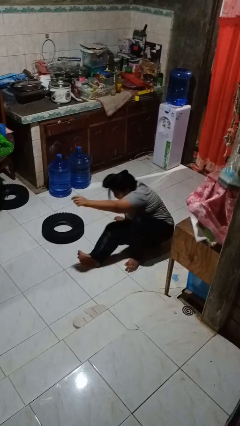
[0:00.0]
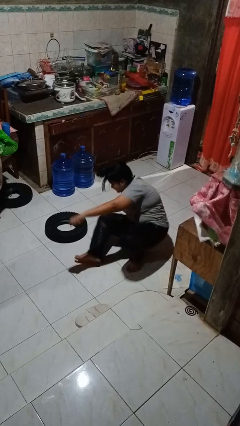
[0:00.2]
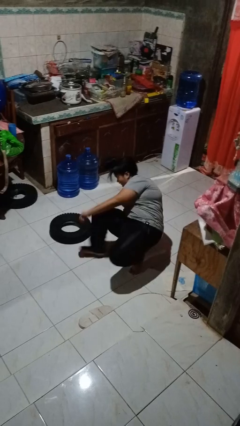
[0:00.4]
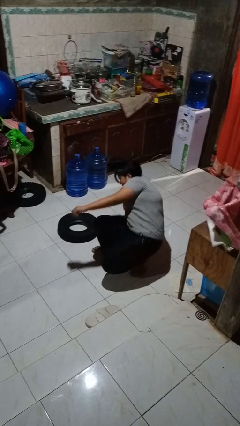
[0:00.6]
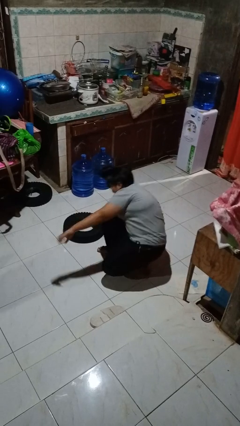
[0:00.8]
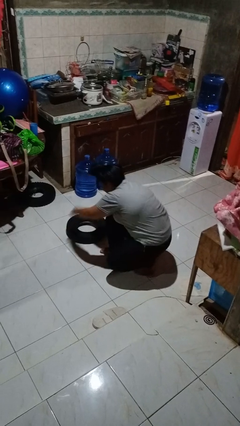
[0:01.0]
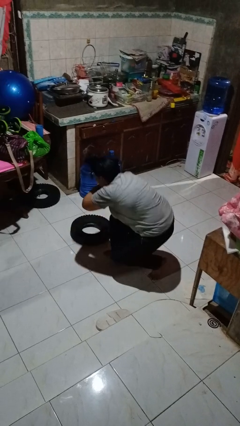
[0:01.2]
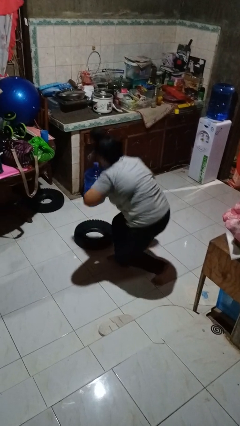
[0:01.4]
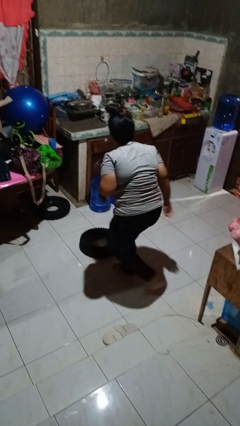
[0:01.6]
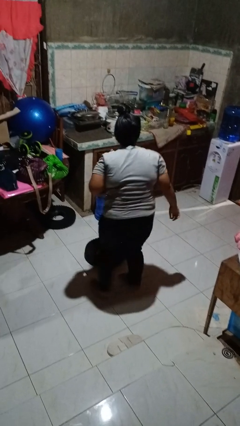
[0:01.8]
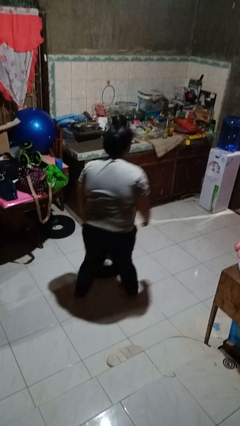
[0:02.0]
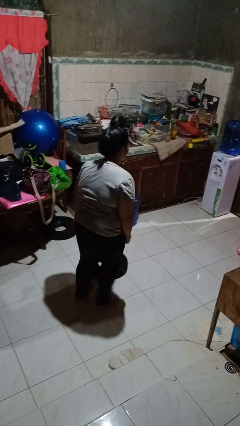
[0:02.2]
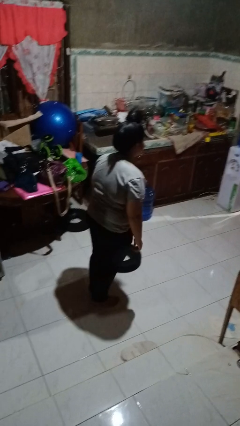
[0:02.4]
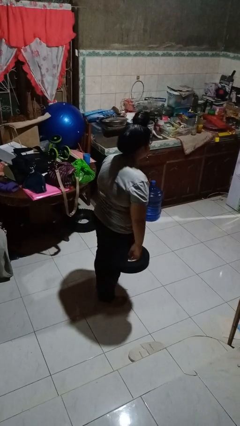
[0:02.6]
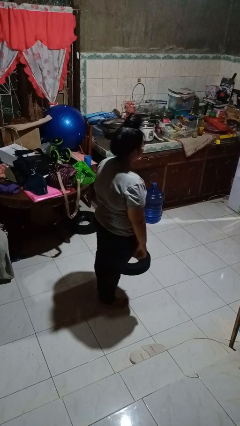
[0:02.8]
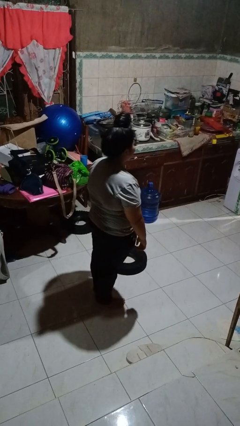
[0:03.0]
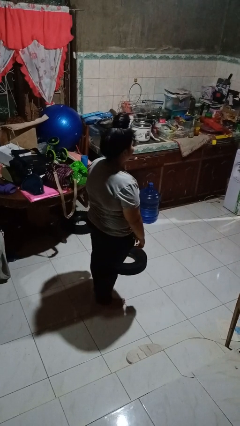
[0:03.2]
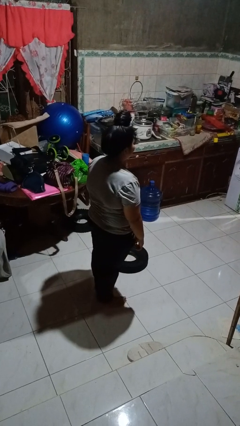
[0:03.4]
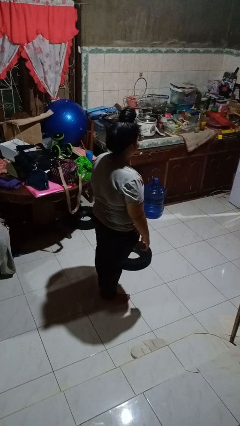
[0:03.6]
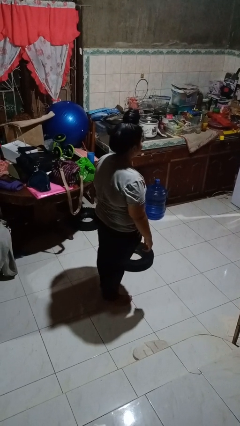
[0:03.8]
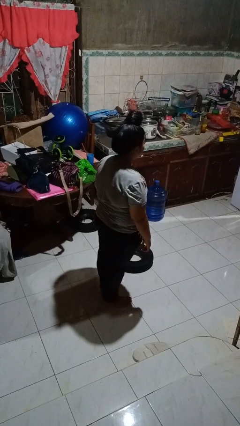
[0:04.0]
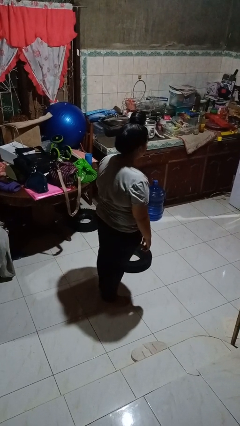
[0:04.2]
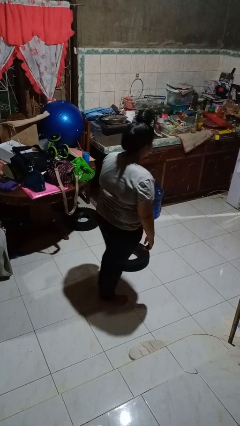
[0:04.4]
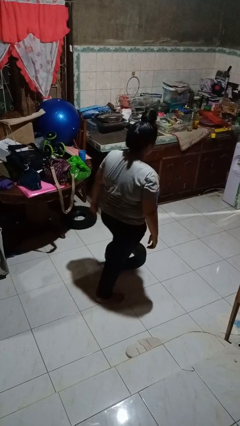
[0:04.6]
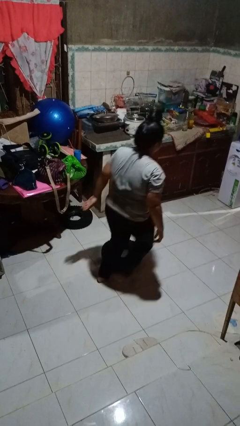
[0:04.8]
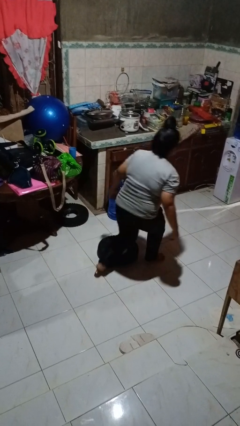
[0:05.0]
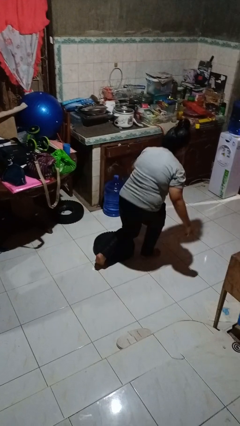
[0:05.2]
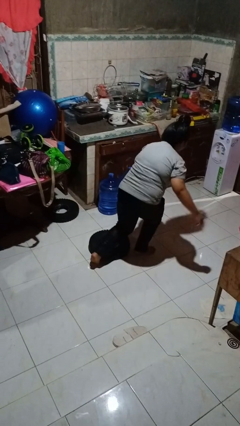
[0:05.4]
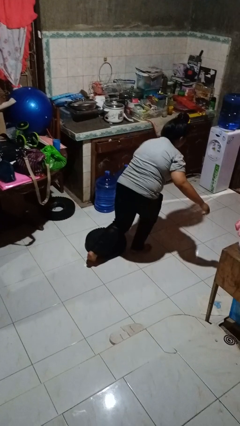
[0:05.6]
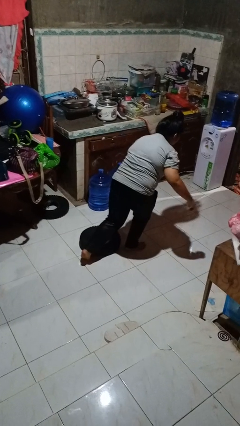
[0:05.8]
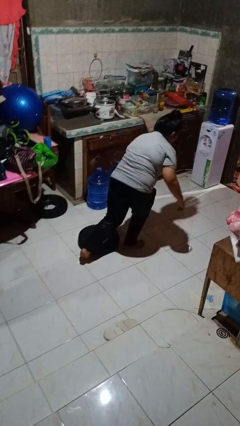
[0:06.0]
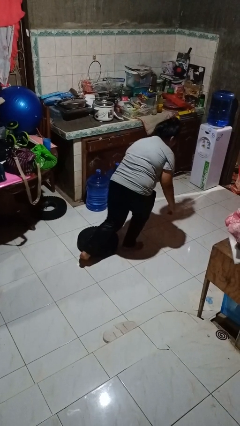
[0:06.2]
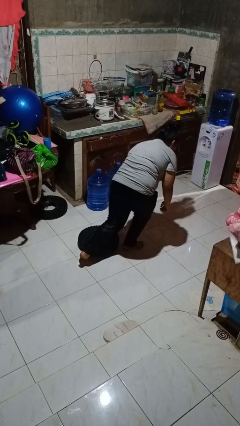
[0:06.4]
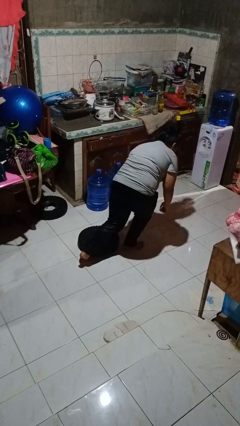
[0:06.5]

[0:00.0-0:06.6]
person stands up from floor

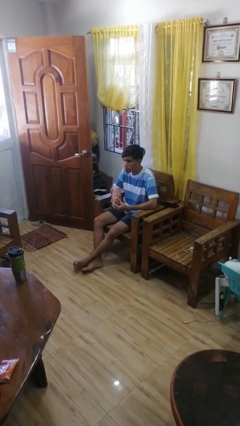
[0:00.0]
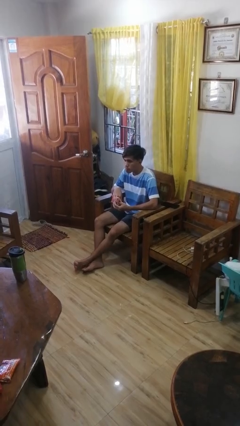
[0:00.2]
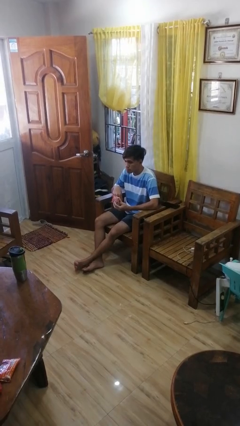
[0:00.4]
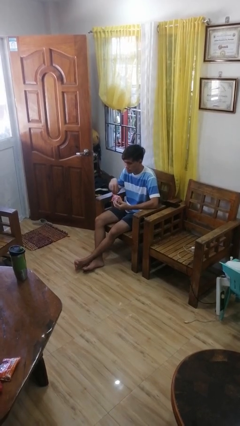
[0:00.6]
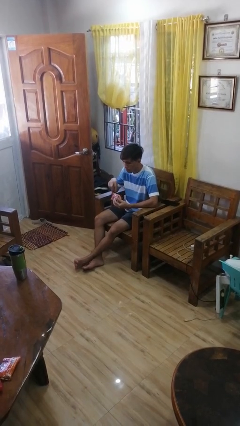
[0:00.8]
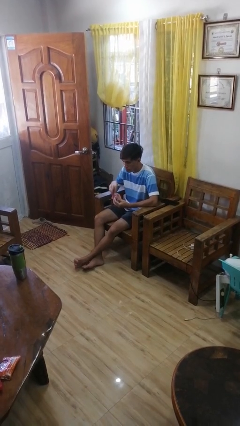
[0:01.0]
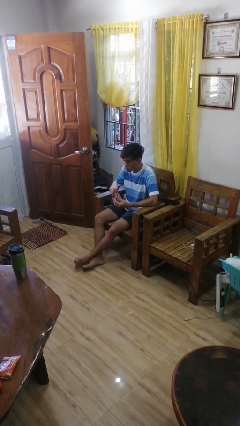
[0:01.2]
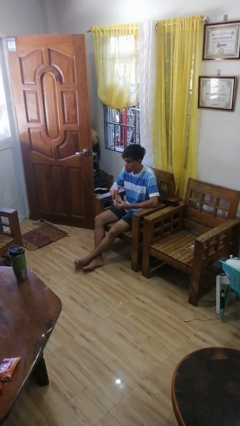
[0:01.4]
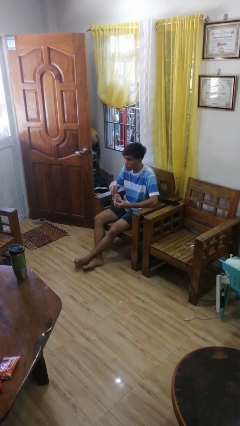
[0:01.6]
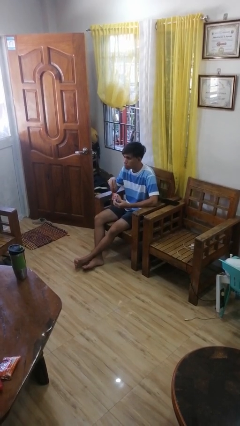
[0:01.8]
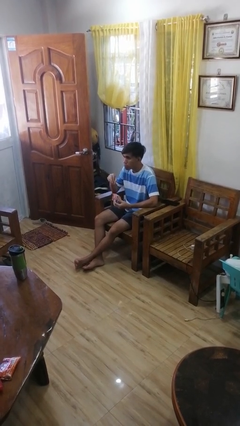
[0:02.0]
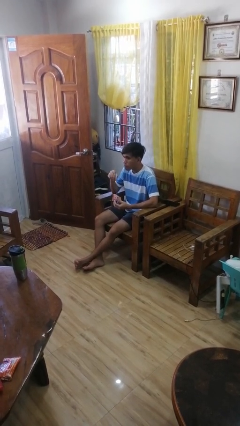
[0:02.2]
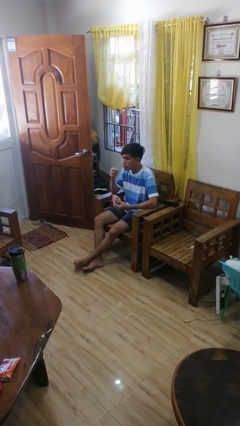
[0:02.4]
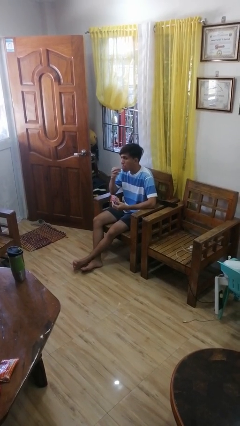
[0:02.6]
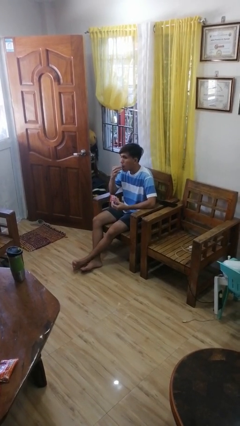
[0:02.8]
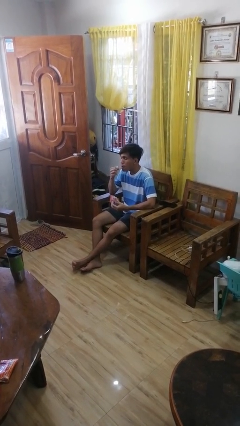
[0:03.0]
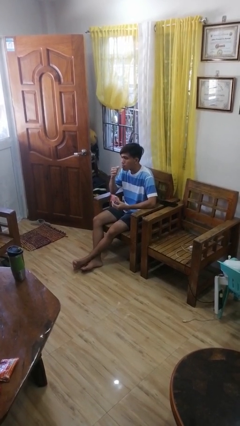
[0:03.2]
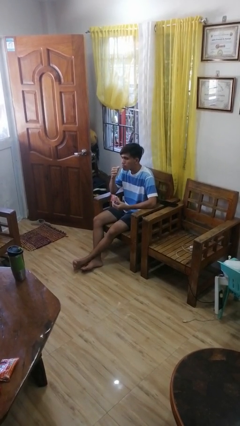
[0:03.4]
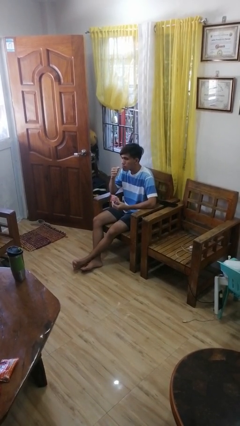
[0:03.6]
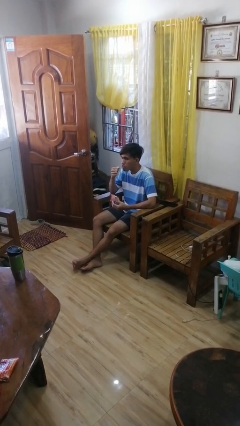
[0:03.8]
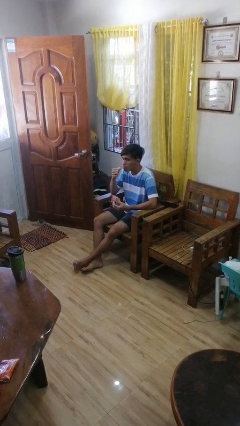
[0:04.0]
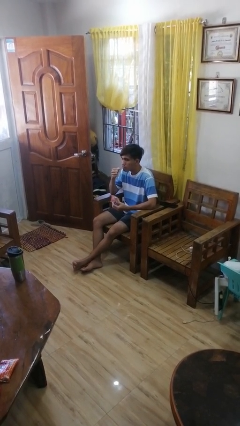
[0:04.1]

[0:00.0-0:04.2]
person eats snack from bag

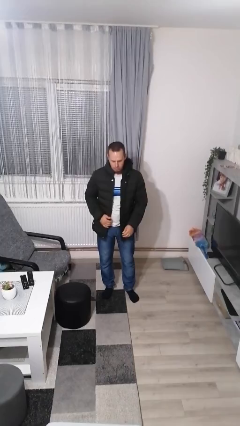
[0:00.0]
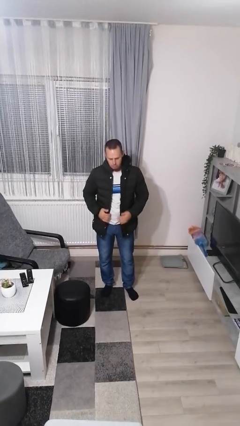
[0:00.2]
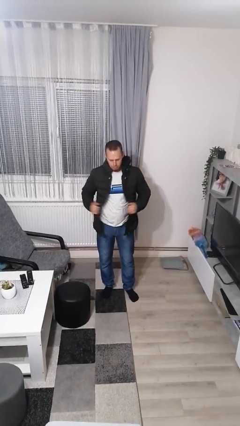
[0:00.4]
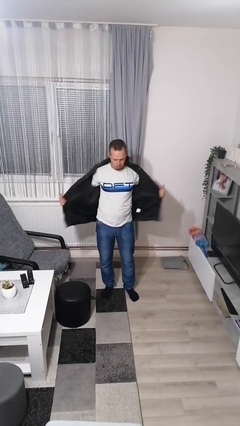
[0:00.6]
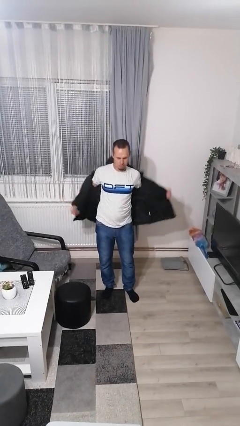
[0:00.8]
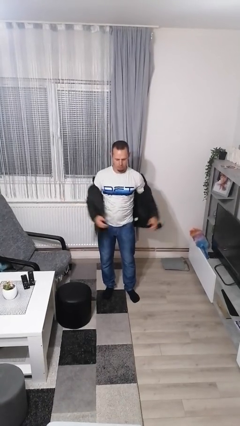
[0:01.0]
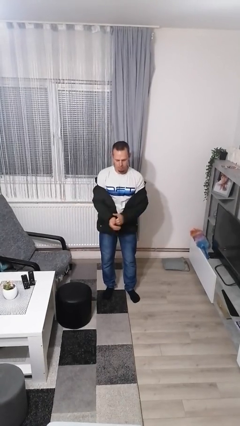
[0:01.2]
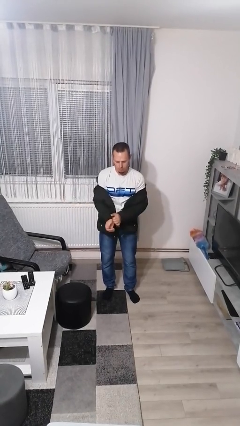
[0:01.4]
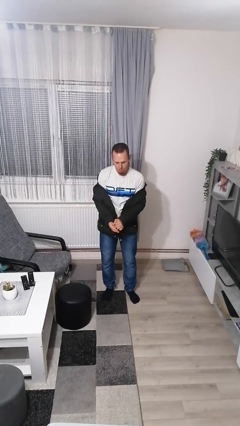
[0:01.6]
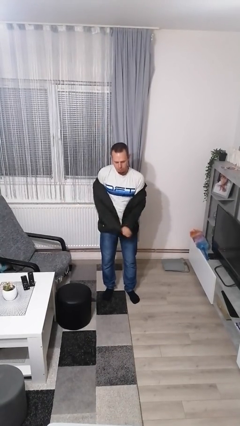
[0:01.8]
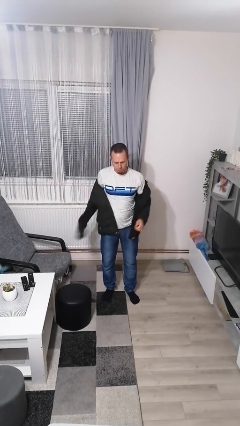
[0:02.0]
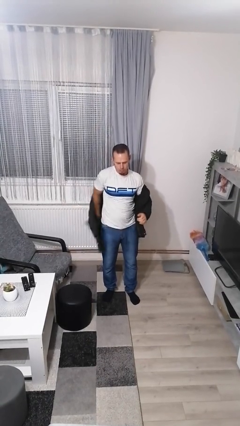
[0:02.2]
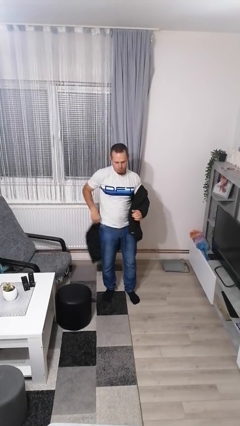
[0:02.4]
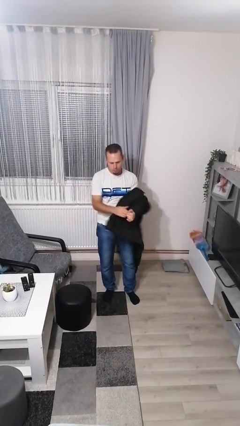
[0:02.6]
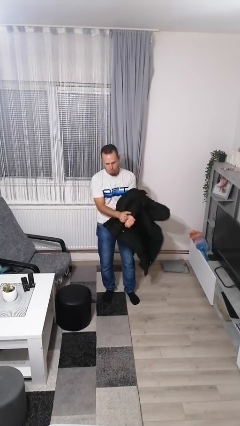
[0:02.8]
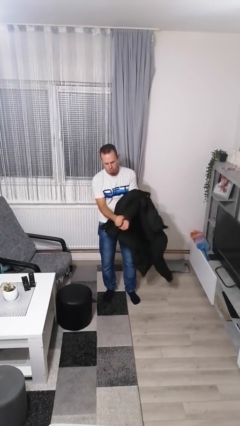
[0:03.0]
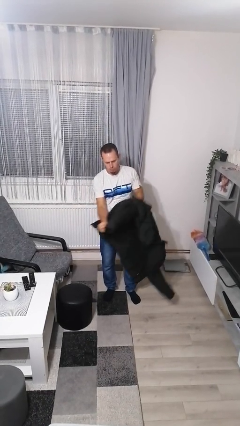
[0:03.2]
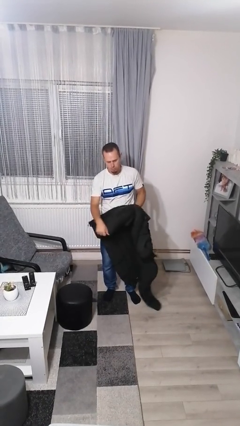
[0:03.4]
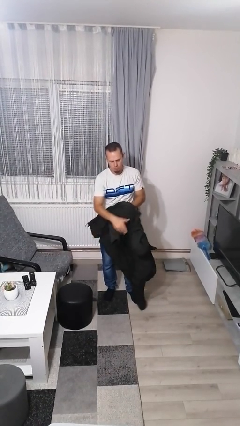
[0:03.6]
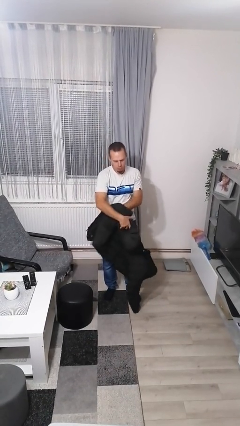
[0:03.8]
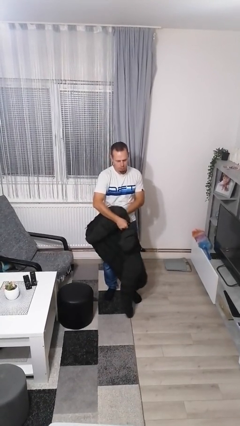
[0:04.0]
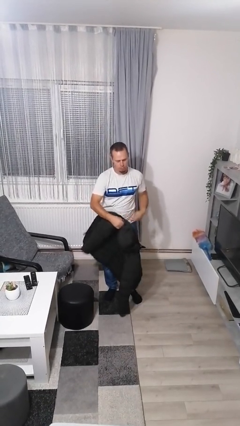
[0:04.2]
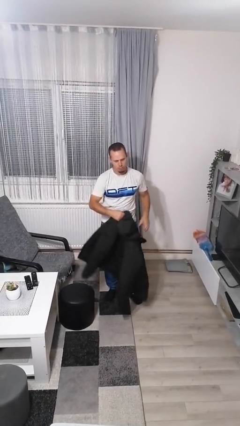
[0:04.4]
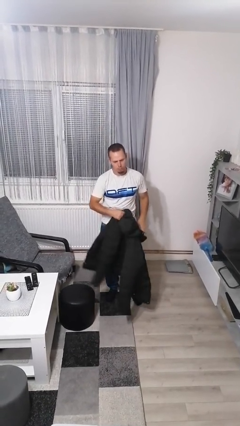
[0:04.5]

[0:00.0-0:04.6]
person takes off jacket

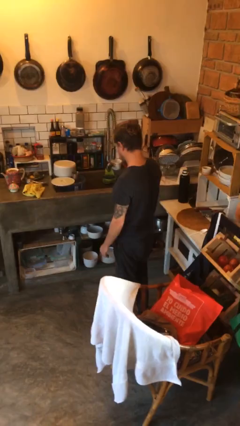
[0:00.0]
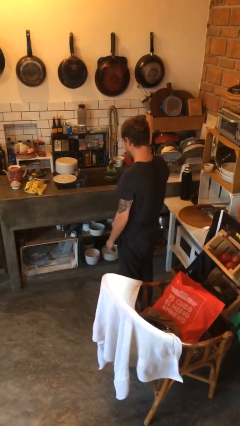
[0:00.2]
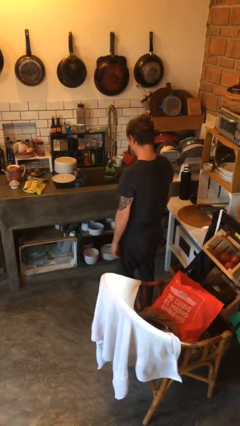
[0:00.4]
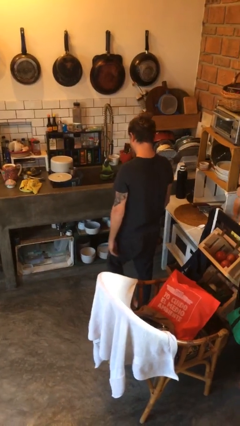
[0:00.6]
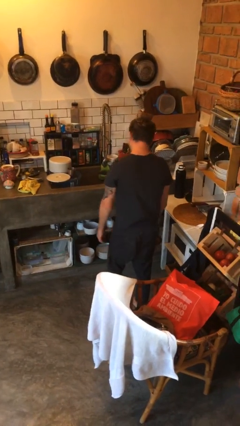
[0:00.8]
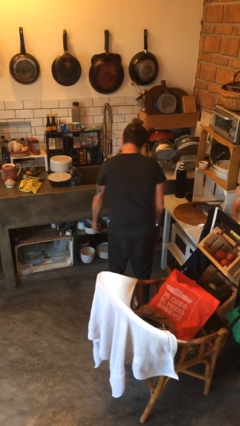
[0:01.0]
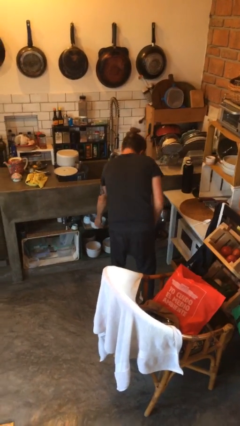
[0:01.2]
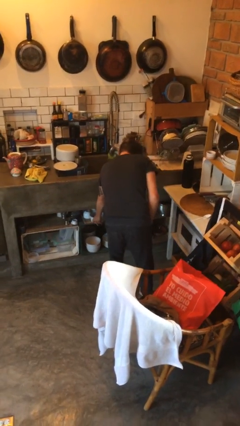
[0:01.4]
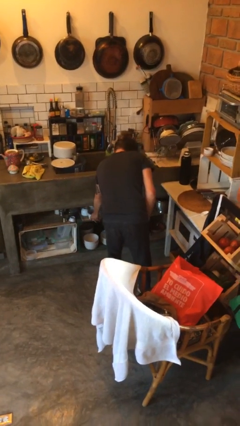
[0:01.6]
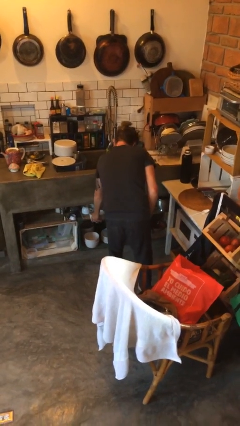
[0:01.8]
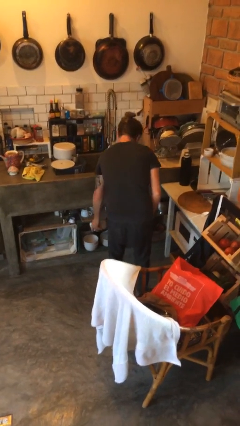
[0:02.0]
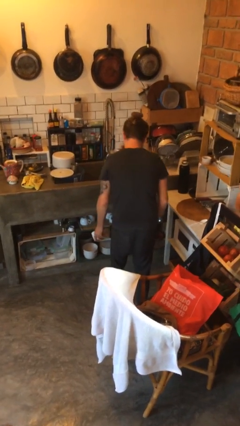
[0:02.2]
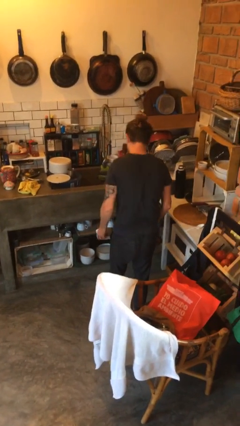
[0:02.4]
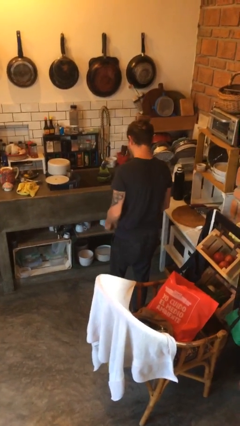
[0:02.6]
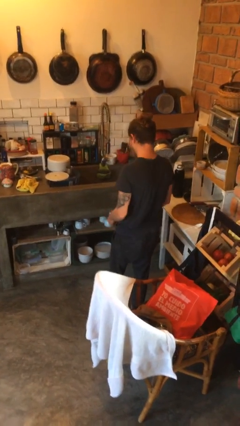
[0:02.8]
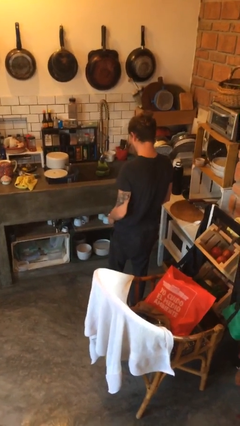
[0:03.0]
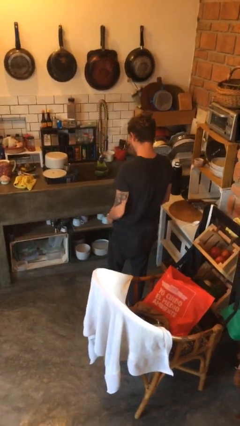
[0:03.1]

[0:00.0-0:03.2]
person picks up object from cabinet
